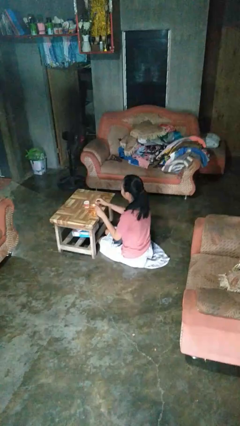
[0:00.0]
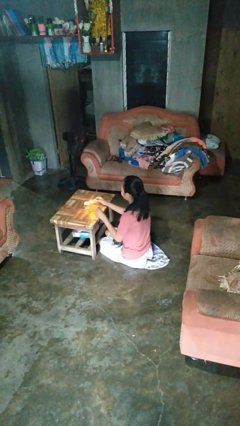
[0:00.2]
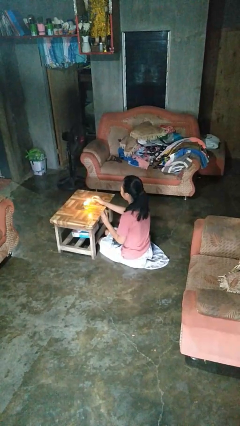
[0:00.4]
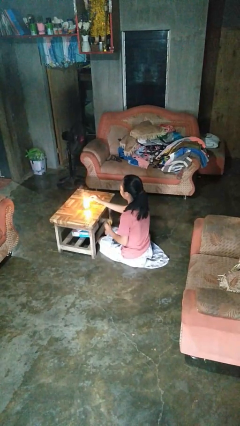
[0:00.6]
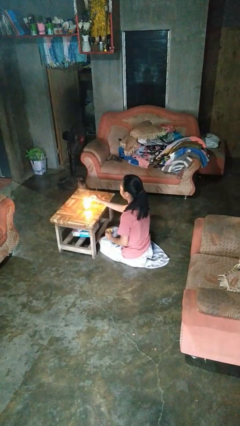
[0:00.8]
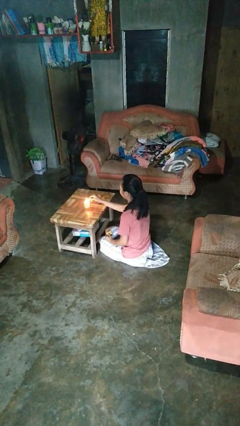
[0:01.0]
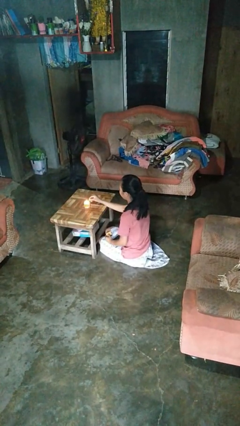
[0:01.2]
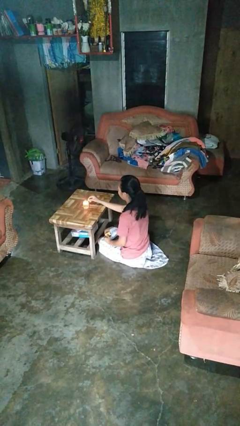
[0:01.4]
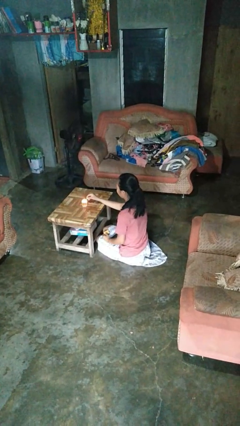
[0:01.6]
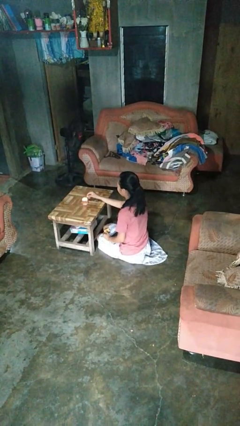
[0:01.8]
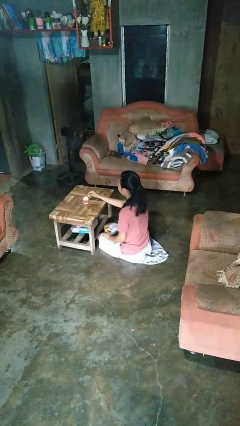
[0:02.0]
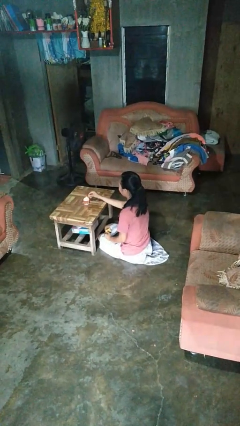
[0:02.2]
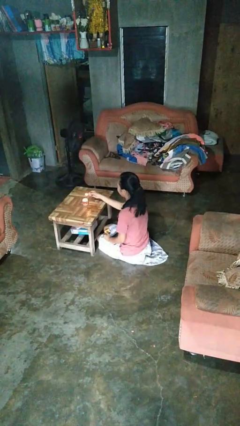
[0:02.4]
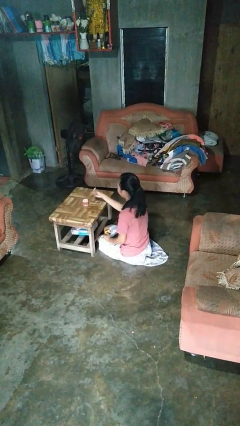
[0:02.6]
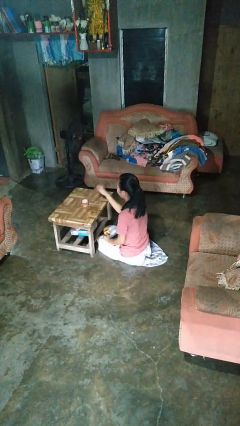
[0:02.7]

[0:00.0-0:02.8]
person lights candle

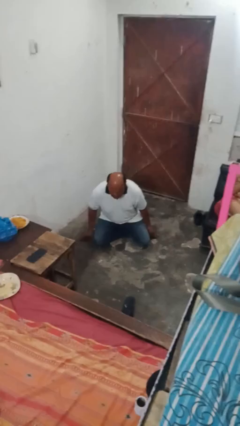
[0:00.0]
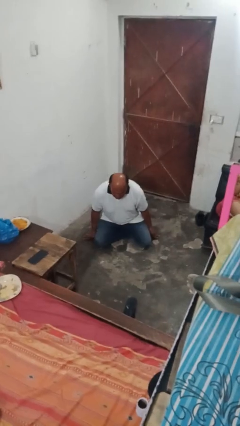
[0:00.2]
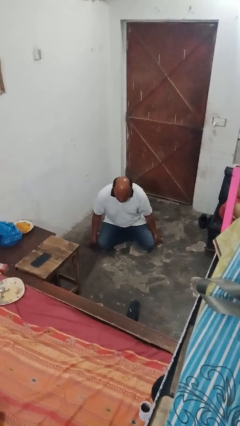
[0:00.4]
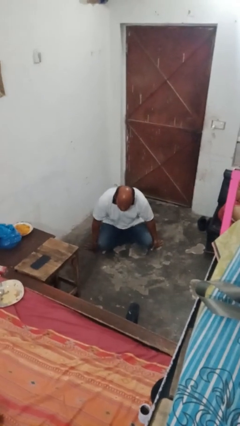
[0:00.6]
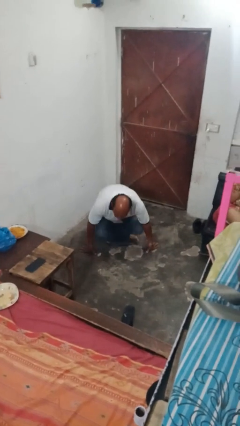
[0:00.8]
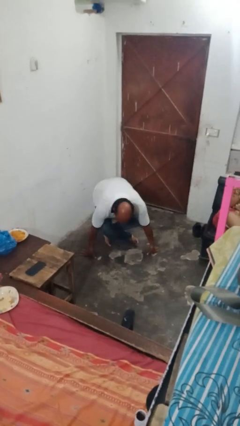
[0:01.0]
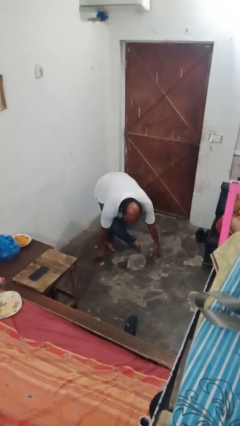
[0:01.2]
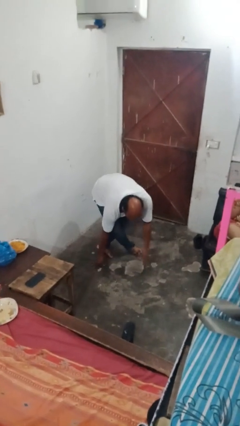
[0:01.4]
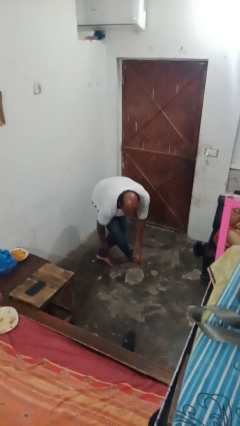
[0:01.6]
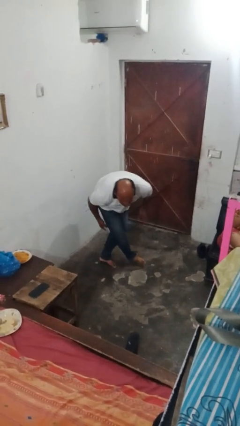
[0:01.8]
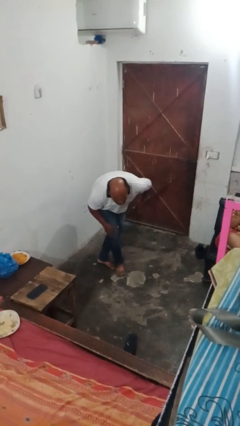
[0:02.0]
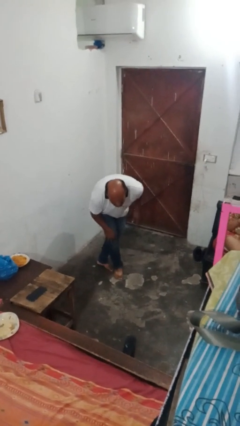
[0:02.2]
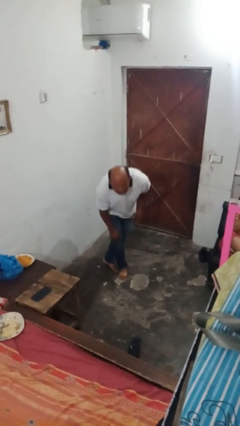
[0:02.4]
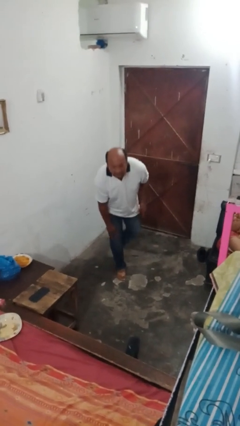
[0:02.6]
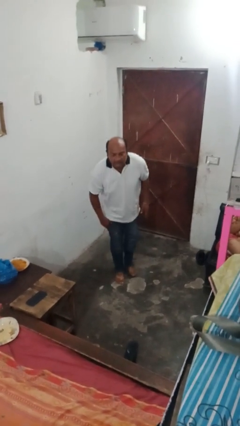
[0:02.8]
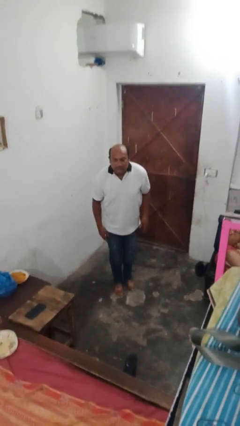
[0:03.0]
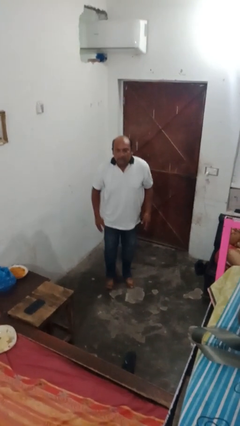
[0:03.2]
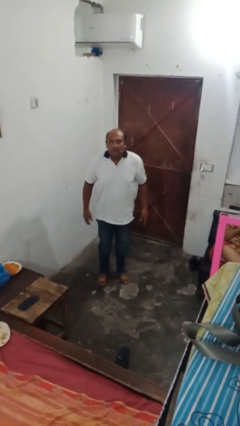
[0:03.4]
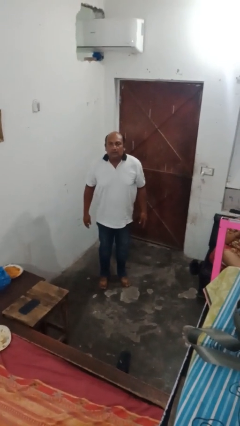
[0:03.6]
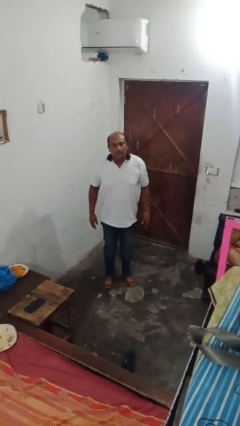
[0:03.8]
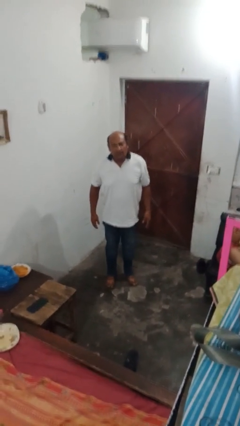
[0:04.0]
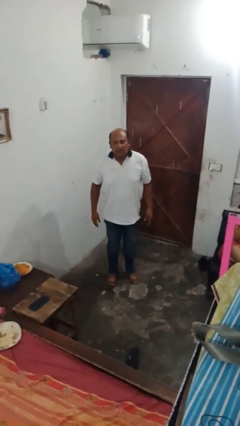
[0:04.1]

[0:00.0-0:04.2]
person stands up from floor

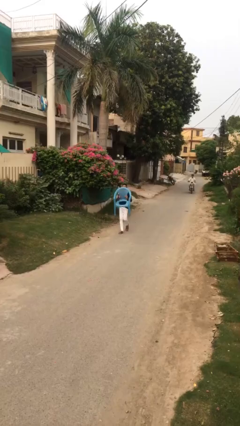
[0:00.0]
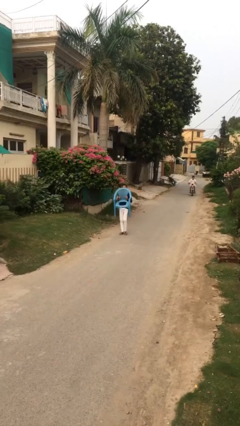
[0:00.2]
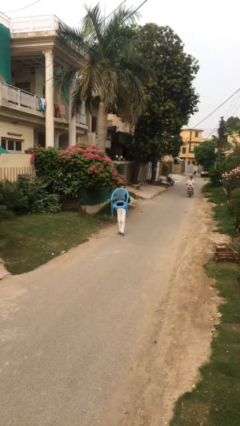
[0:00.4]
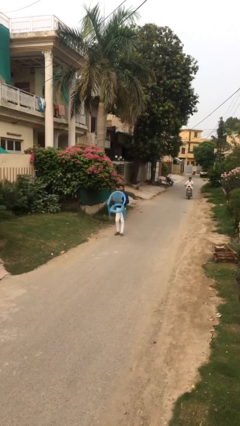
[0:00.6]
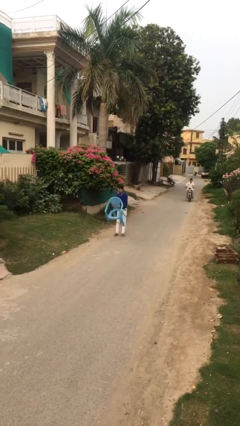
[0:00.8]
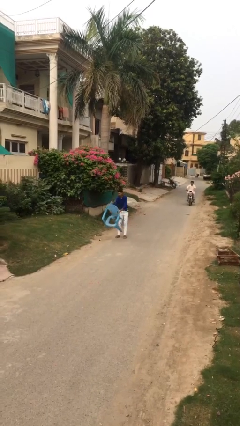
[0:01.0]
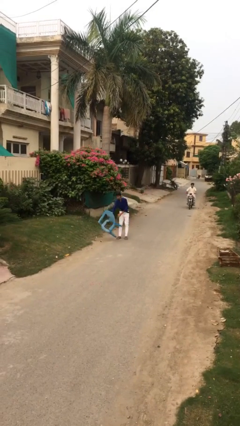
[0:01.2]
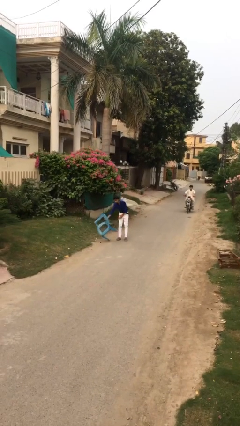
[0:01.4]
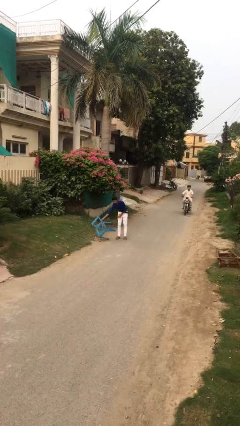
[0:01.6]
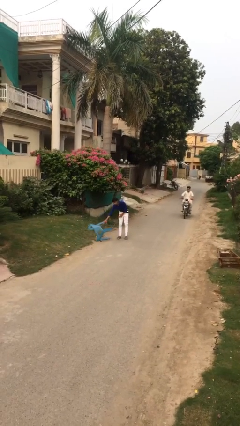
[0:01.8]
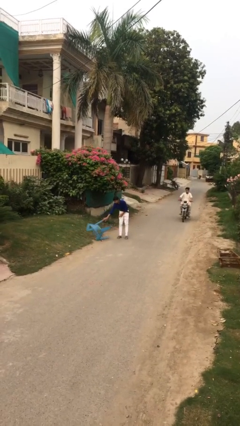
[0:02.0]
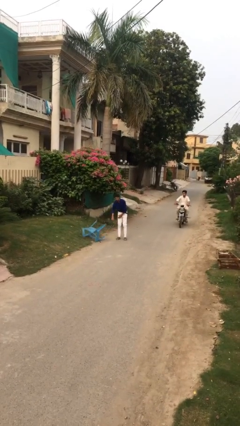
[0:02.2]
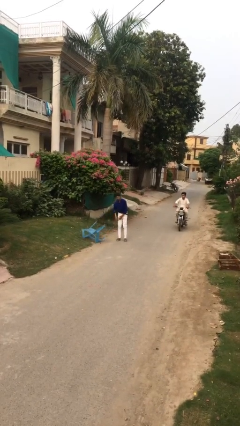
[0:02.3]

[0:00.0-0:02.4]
person puts down object on floor

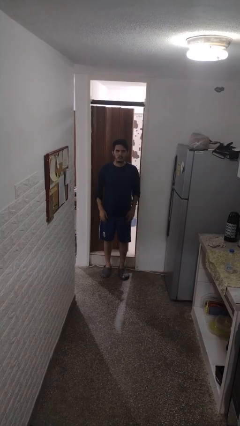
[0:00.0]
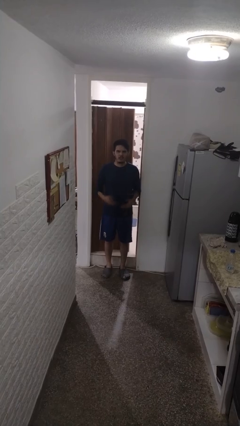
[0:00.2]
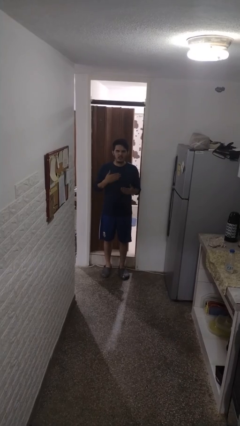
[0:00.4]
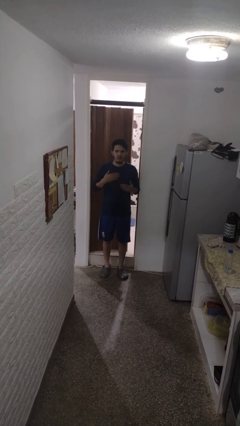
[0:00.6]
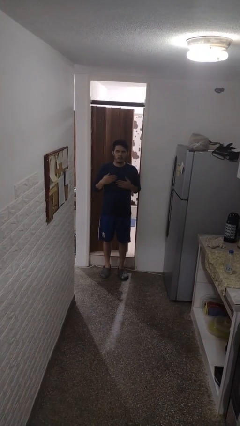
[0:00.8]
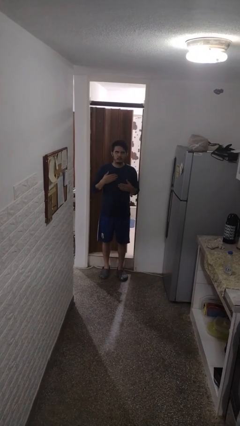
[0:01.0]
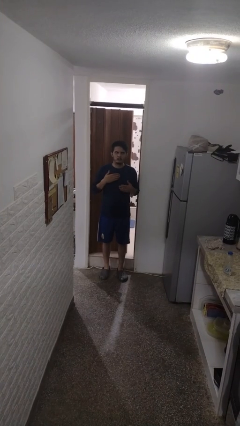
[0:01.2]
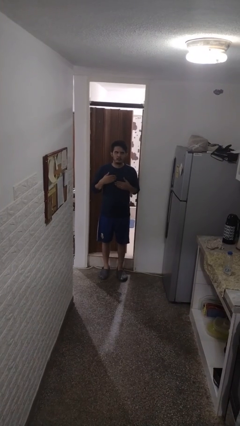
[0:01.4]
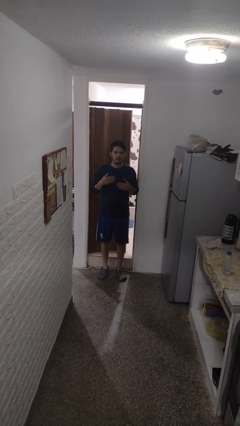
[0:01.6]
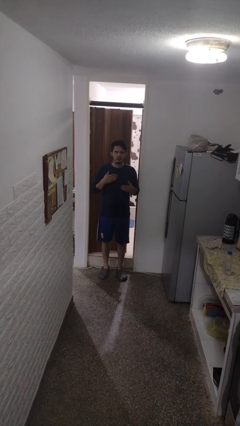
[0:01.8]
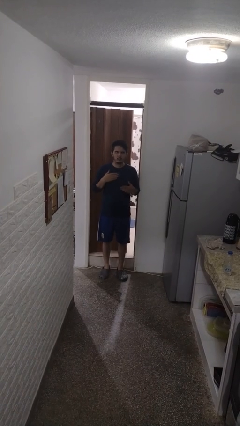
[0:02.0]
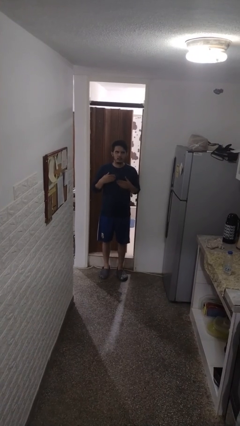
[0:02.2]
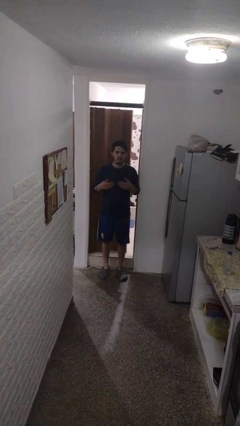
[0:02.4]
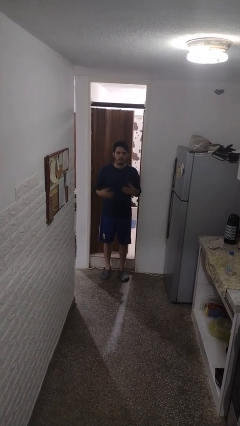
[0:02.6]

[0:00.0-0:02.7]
person drums on chest

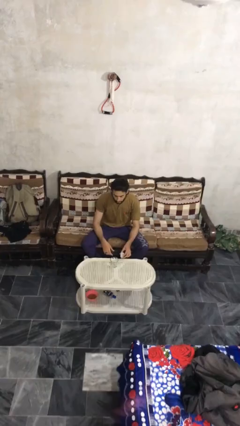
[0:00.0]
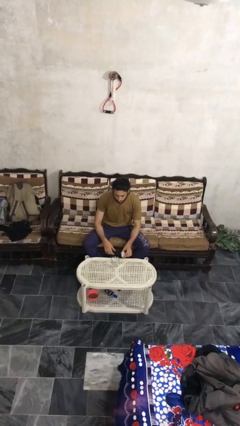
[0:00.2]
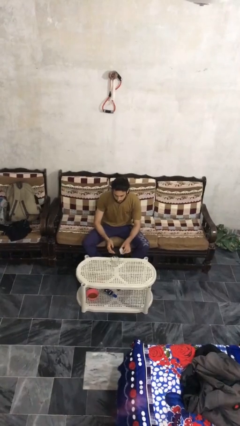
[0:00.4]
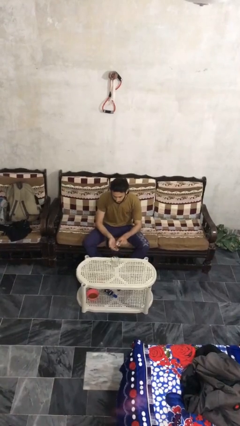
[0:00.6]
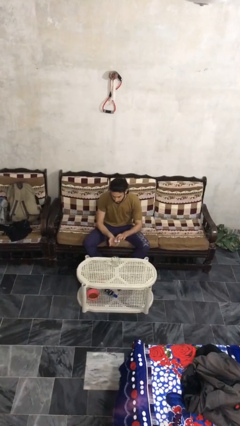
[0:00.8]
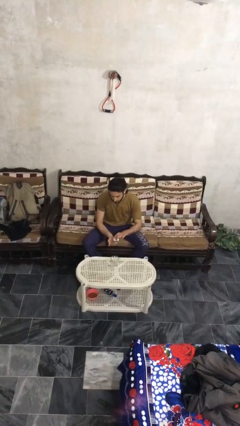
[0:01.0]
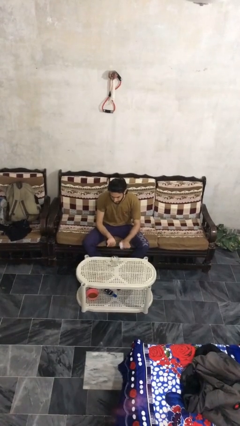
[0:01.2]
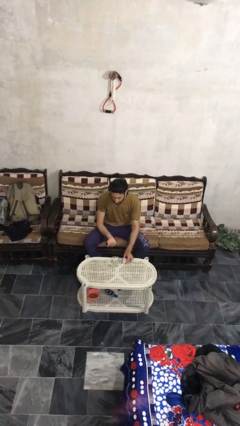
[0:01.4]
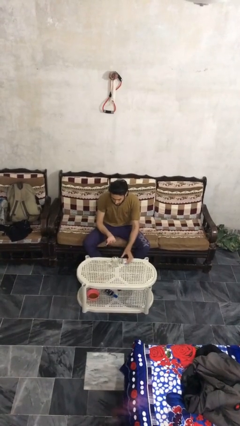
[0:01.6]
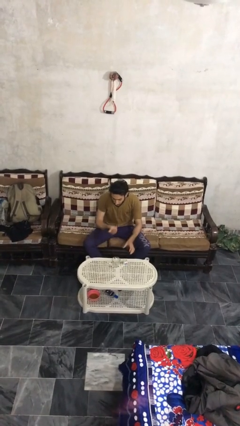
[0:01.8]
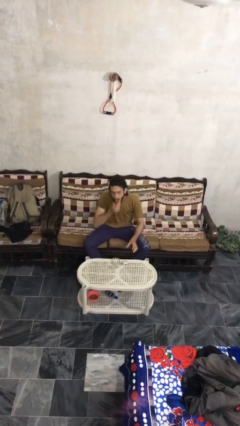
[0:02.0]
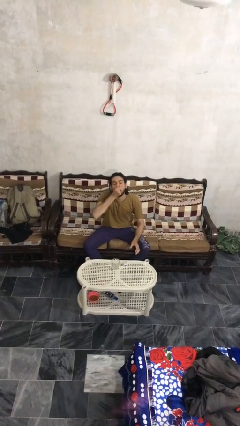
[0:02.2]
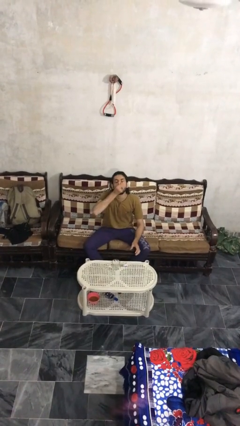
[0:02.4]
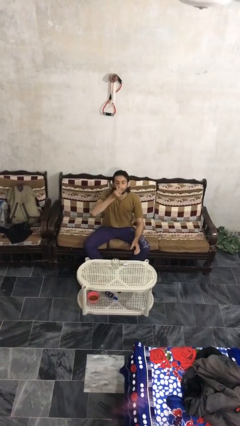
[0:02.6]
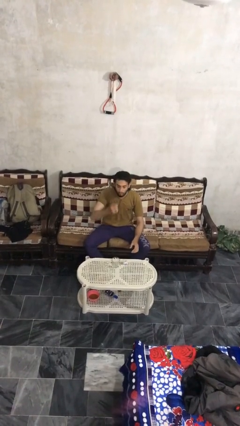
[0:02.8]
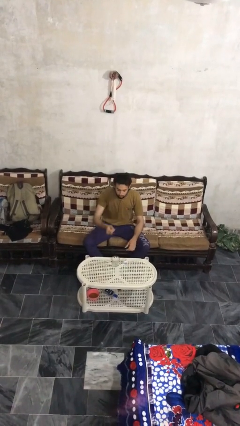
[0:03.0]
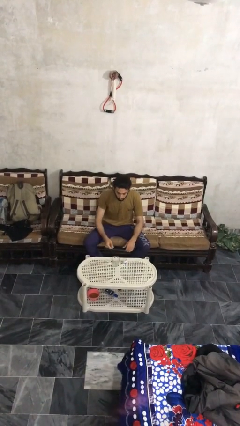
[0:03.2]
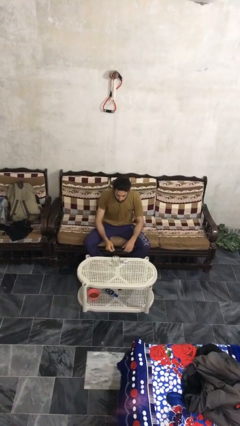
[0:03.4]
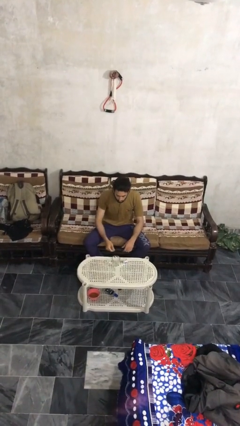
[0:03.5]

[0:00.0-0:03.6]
person takes medicine pills

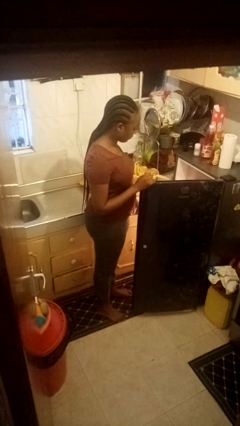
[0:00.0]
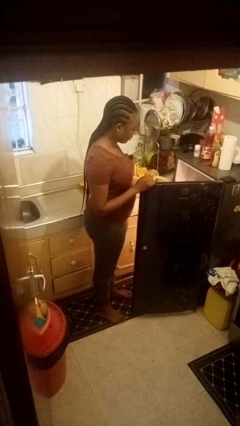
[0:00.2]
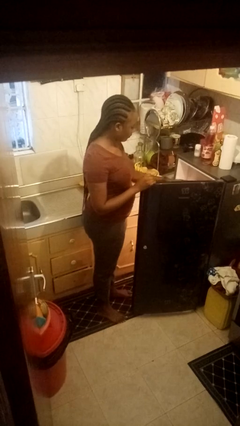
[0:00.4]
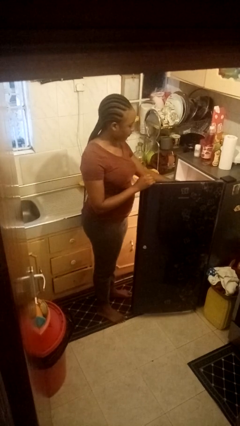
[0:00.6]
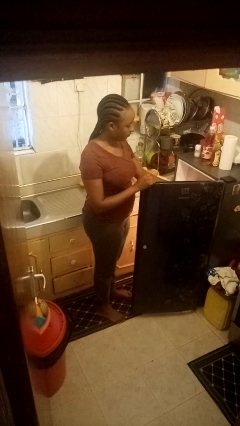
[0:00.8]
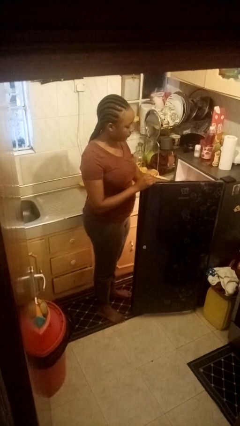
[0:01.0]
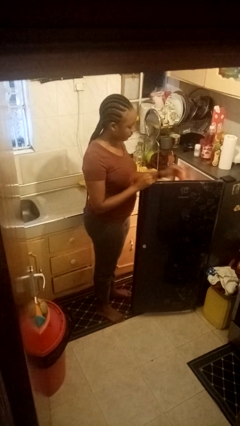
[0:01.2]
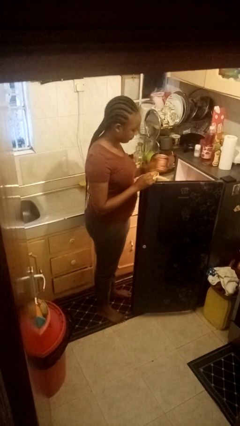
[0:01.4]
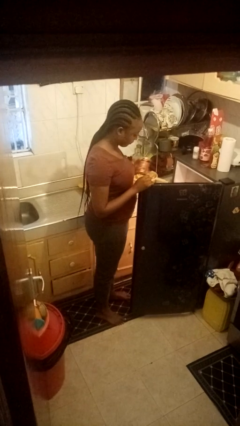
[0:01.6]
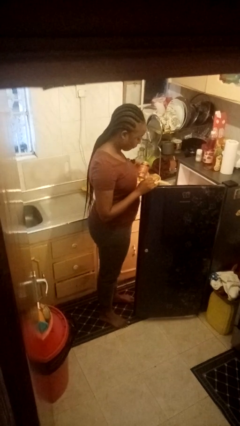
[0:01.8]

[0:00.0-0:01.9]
person takes object from refrigerator

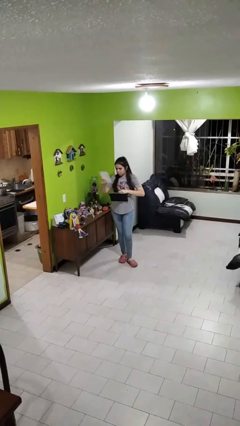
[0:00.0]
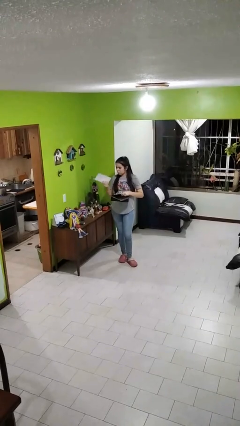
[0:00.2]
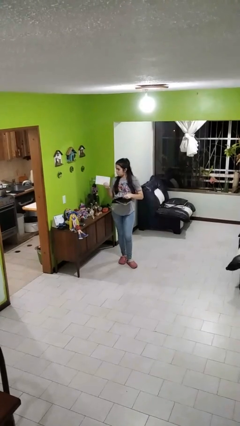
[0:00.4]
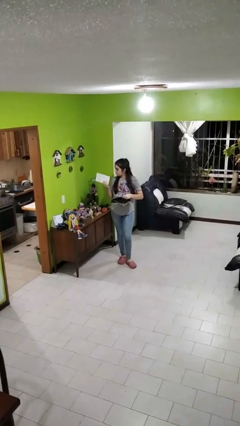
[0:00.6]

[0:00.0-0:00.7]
person takes object from purse
